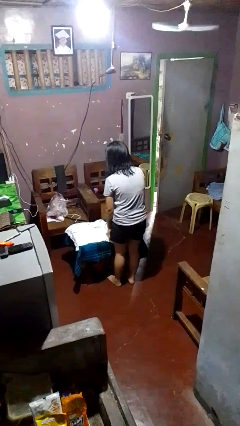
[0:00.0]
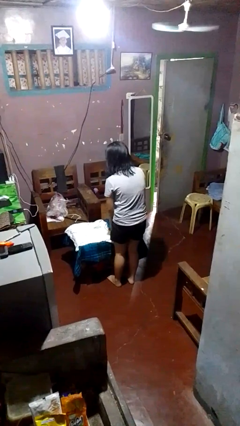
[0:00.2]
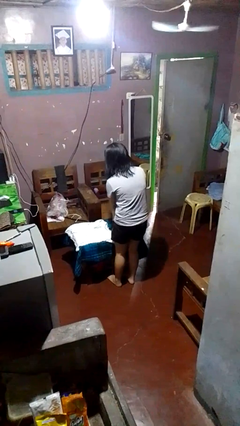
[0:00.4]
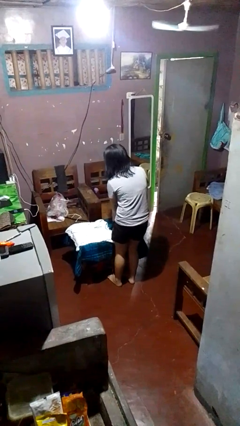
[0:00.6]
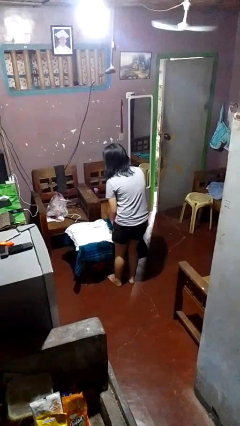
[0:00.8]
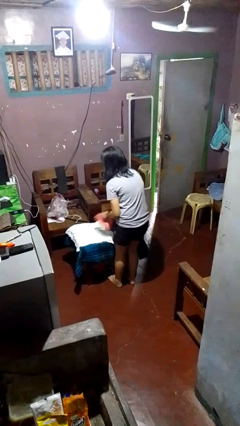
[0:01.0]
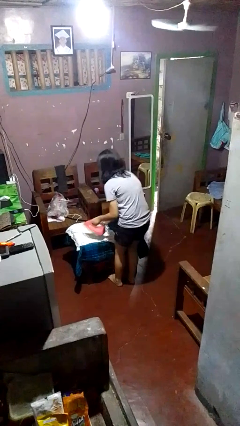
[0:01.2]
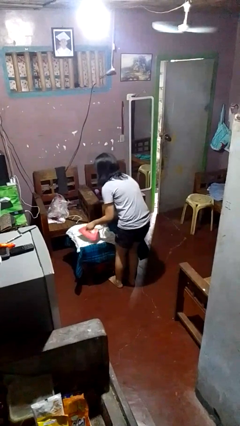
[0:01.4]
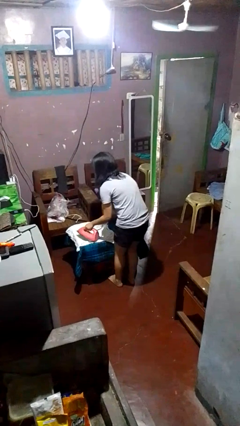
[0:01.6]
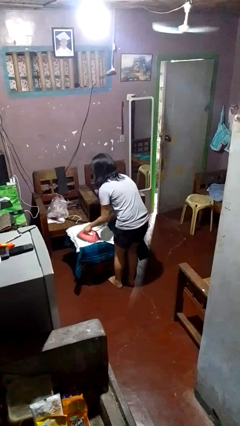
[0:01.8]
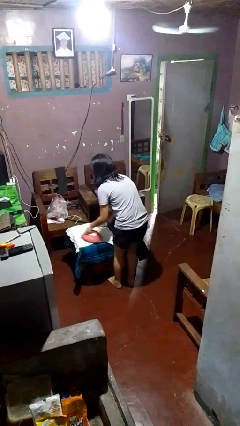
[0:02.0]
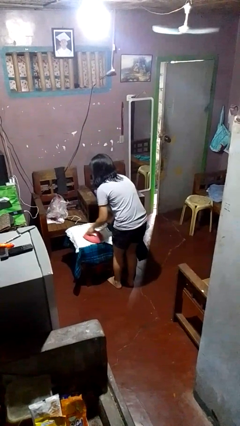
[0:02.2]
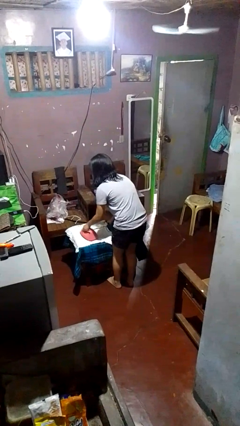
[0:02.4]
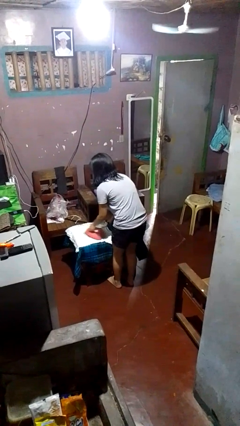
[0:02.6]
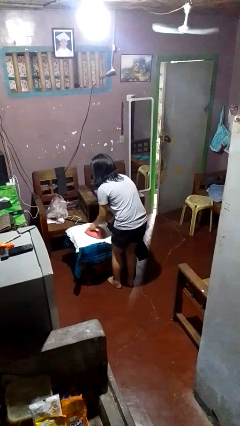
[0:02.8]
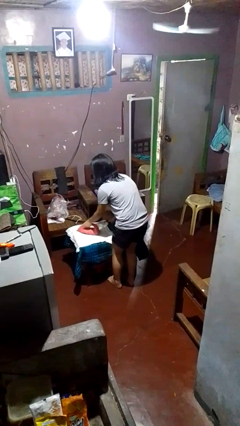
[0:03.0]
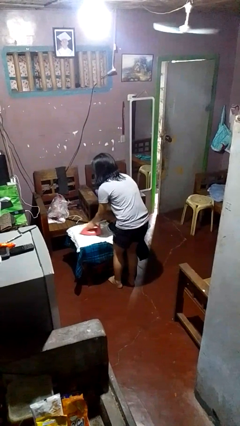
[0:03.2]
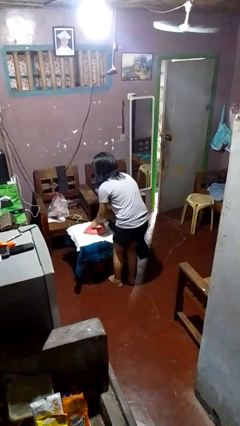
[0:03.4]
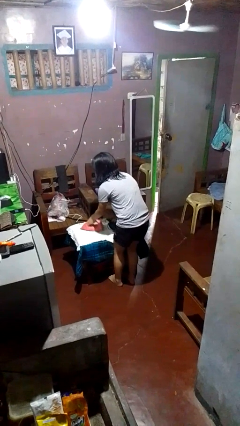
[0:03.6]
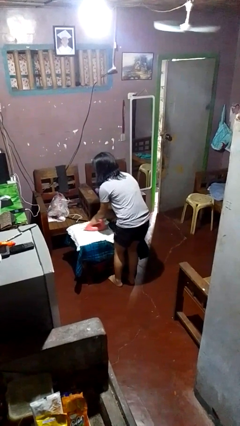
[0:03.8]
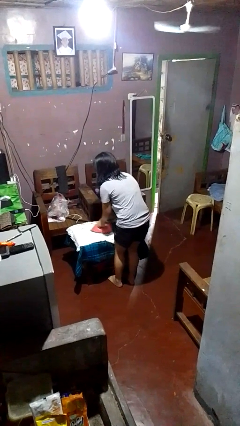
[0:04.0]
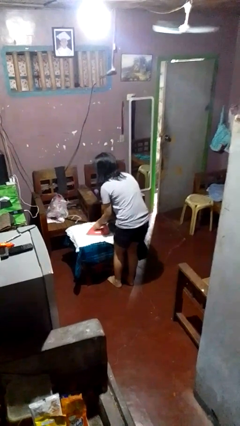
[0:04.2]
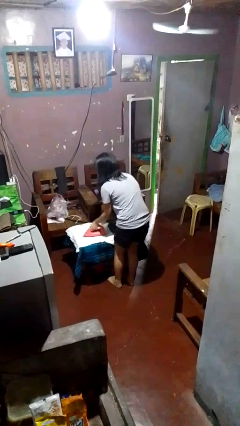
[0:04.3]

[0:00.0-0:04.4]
person irons clothes

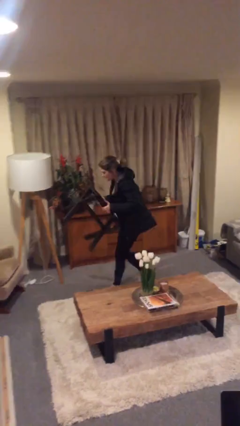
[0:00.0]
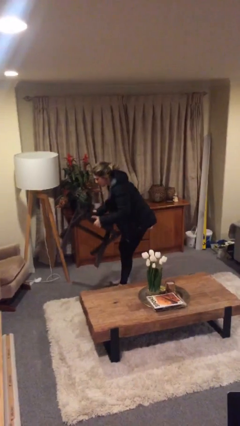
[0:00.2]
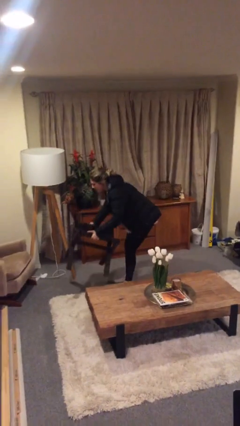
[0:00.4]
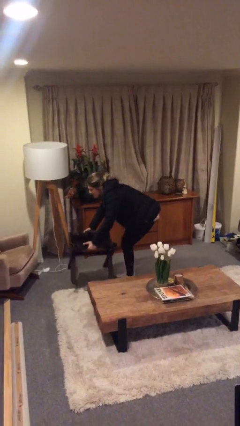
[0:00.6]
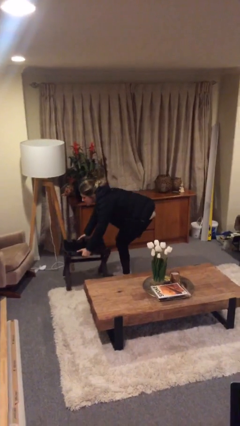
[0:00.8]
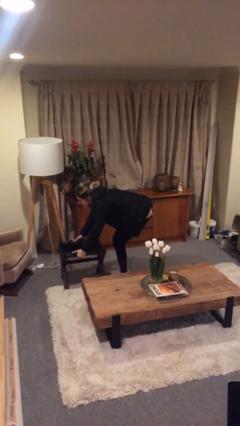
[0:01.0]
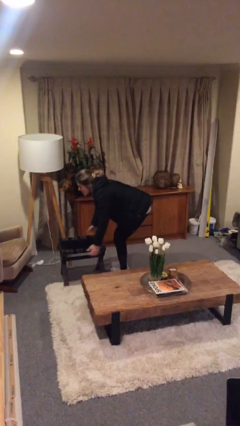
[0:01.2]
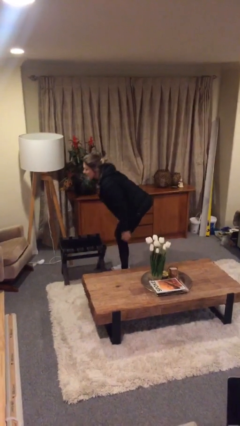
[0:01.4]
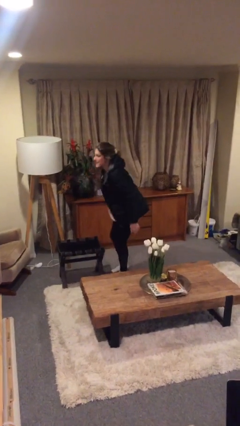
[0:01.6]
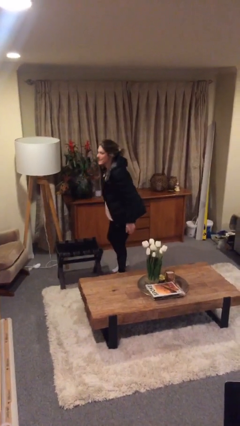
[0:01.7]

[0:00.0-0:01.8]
person puts down object on floor

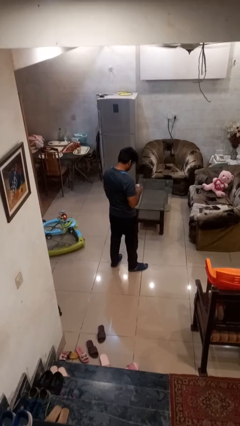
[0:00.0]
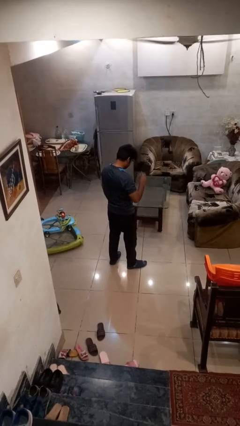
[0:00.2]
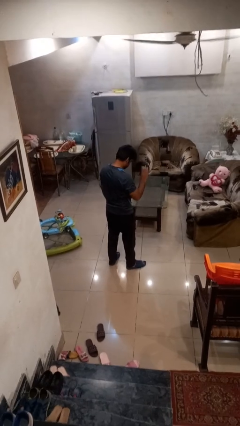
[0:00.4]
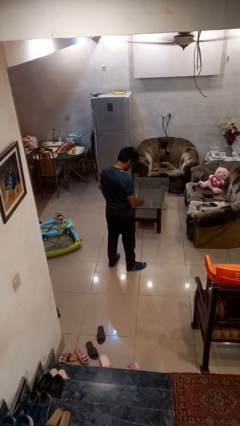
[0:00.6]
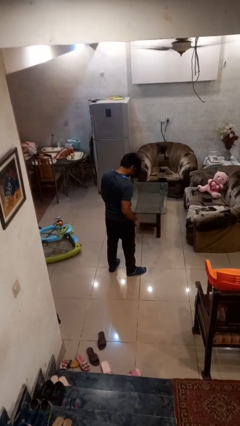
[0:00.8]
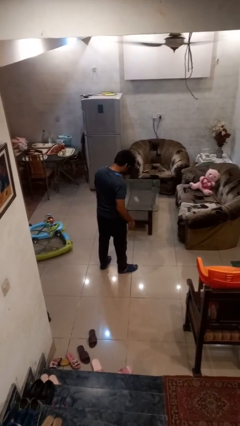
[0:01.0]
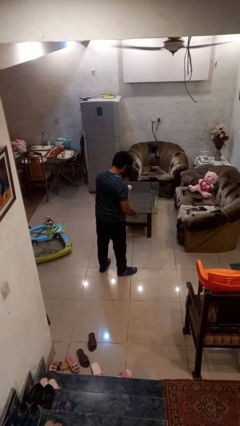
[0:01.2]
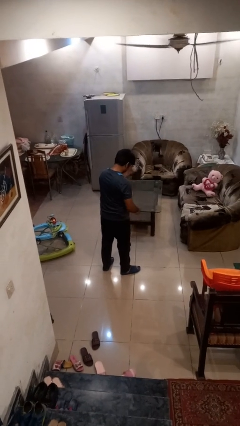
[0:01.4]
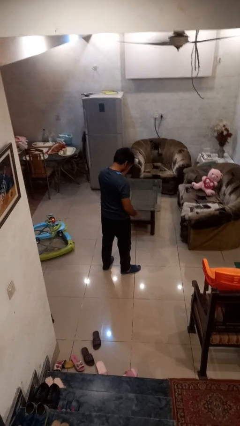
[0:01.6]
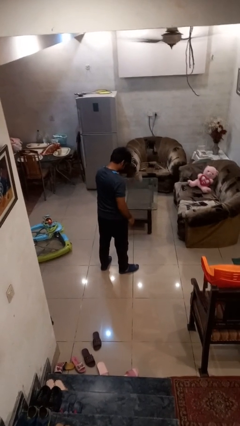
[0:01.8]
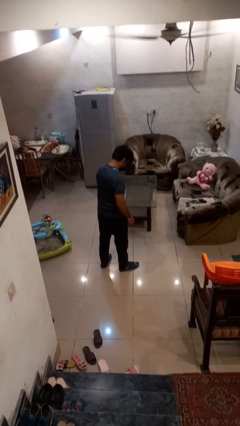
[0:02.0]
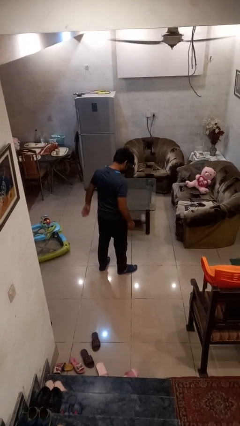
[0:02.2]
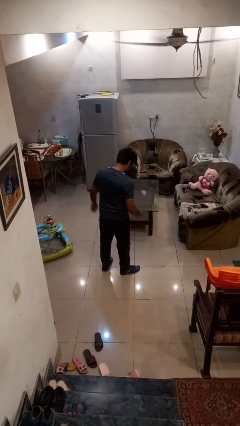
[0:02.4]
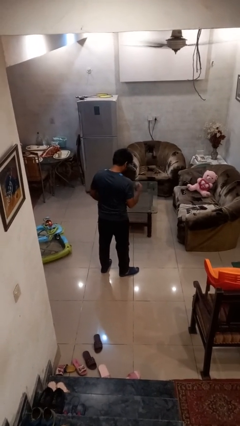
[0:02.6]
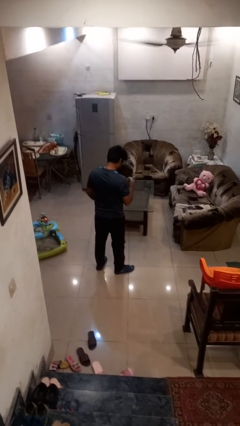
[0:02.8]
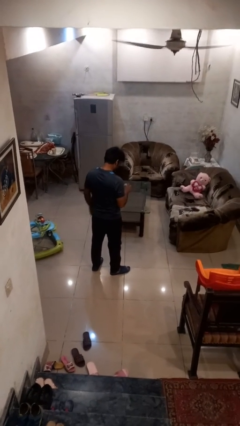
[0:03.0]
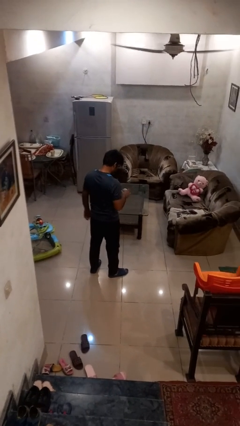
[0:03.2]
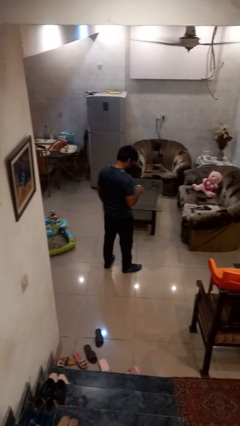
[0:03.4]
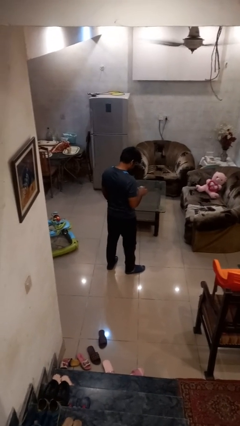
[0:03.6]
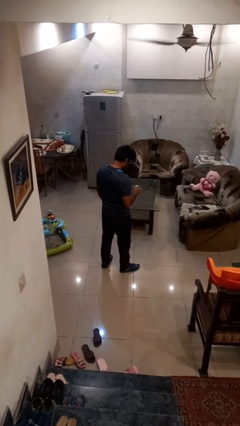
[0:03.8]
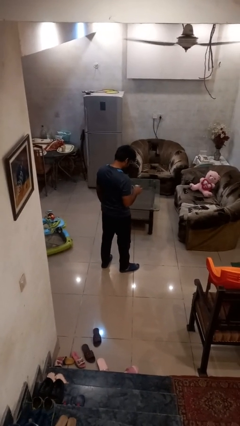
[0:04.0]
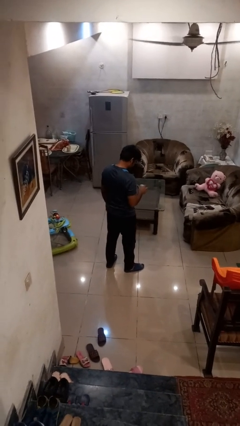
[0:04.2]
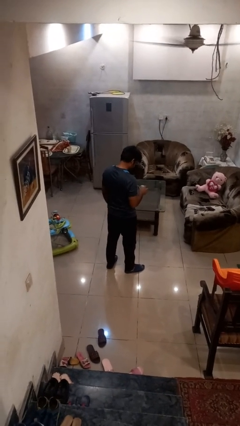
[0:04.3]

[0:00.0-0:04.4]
person bounces ball on floor

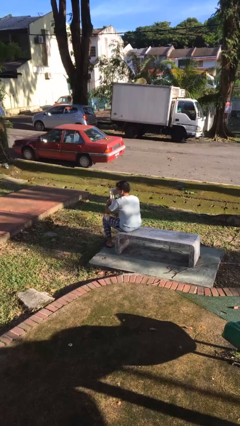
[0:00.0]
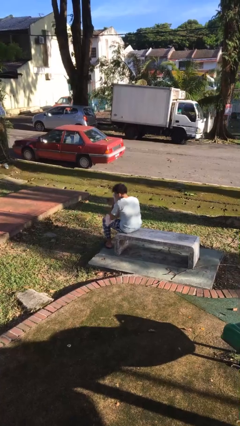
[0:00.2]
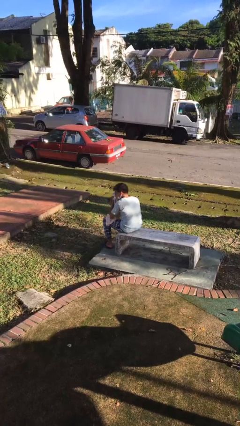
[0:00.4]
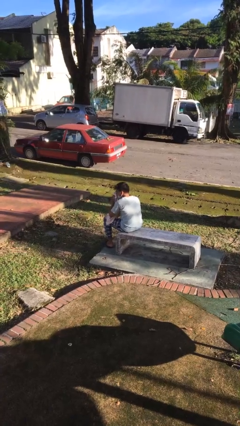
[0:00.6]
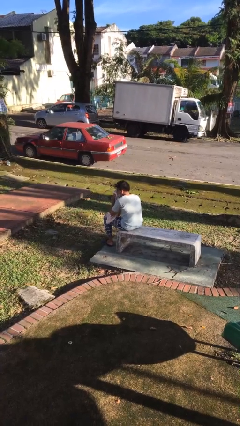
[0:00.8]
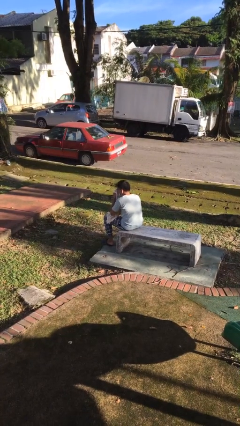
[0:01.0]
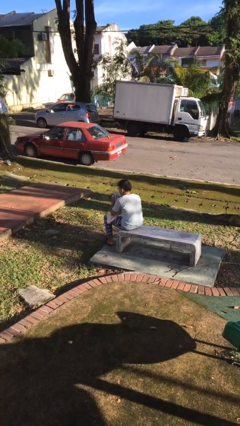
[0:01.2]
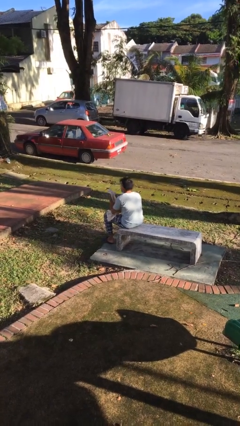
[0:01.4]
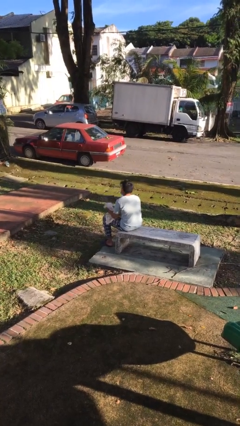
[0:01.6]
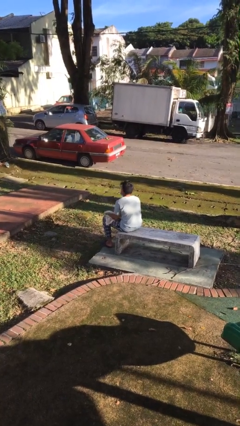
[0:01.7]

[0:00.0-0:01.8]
person blows nose

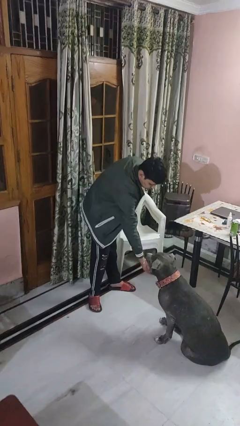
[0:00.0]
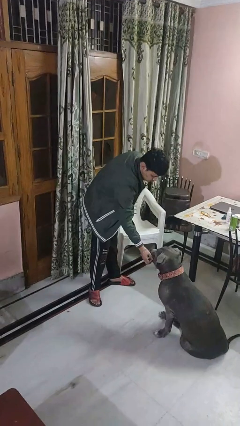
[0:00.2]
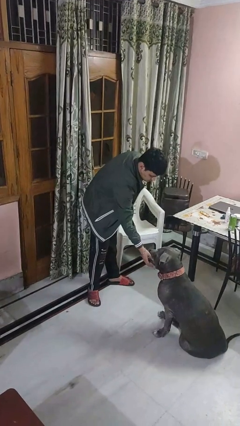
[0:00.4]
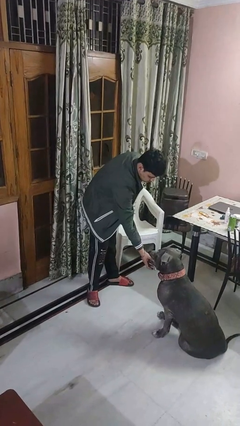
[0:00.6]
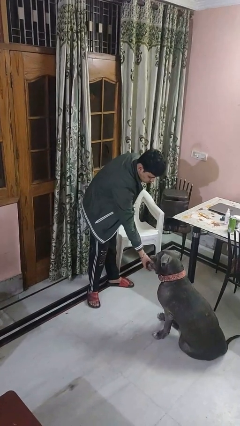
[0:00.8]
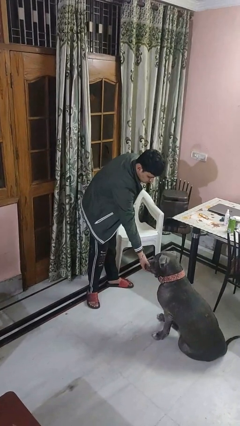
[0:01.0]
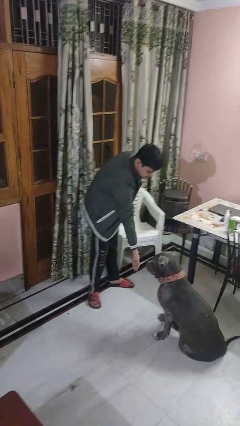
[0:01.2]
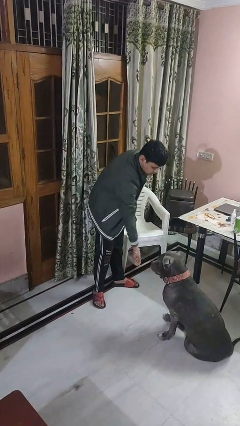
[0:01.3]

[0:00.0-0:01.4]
person feeds dog

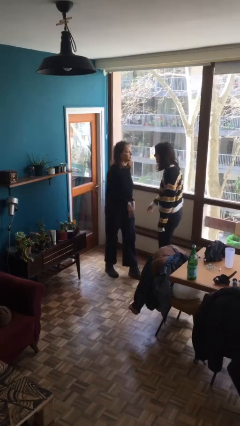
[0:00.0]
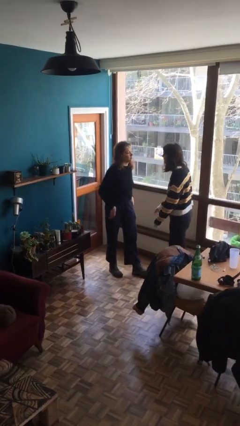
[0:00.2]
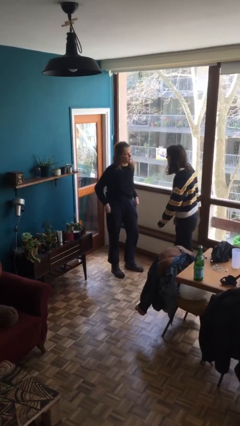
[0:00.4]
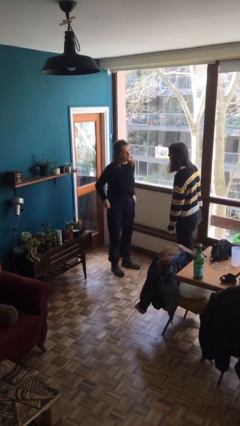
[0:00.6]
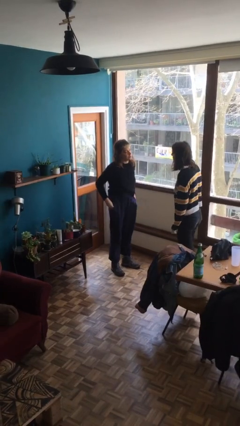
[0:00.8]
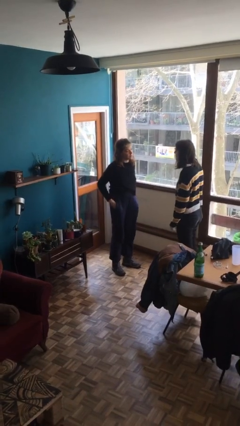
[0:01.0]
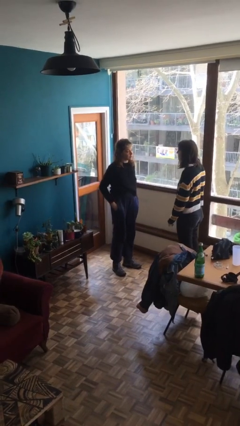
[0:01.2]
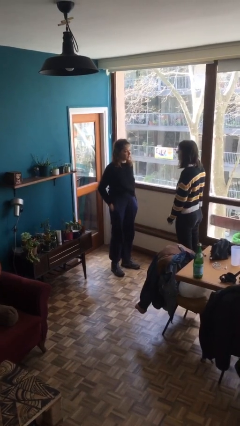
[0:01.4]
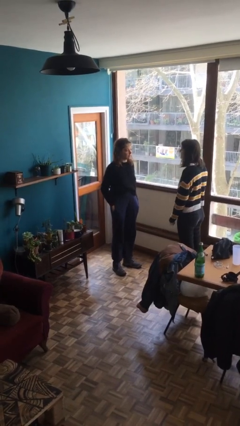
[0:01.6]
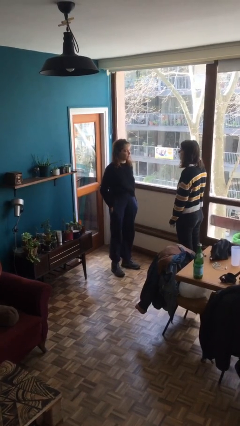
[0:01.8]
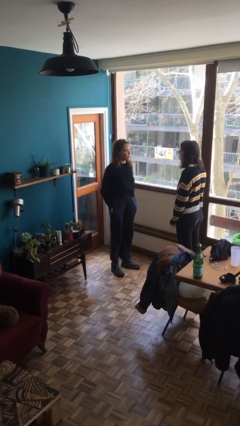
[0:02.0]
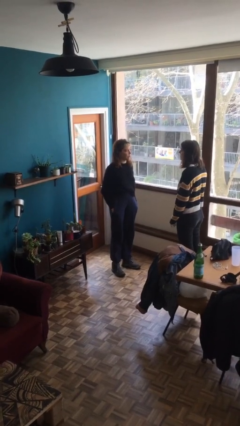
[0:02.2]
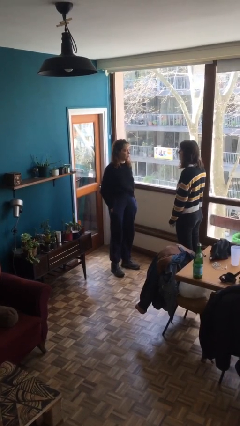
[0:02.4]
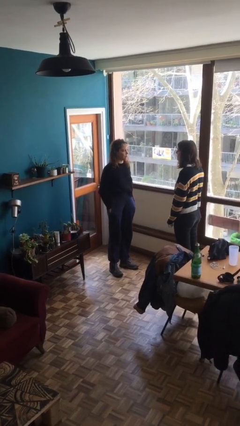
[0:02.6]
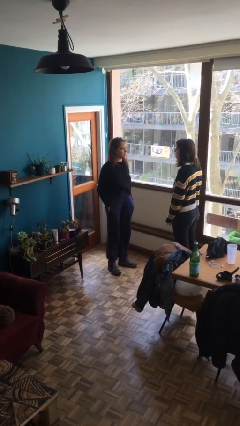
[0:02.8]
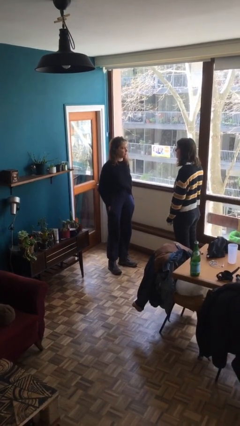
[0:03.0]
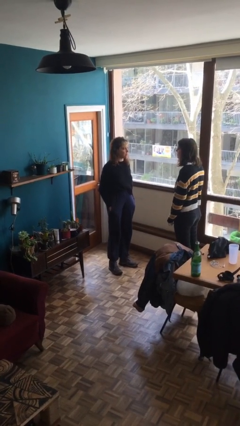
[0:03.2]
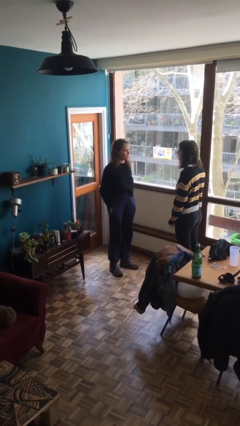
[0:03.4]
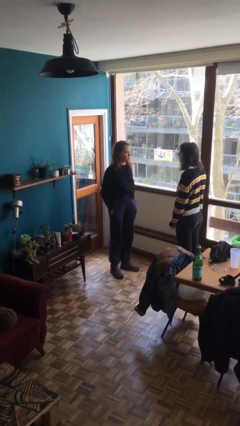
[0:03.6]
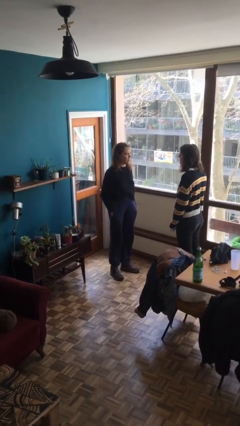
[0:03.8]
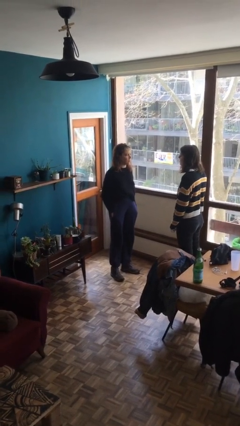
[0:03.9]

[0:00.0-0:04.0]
person talks to person
